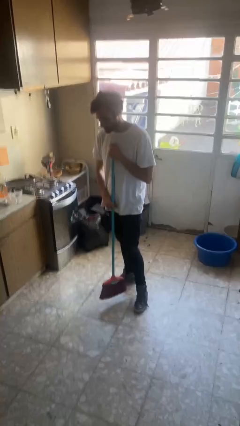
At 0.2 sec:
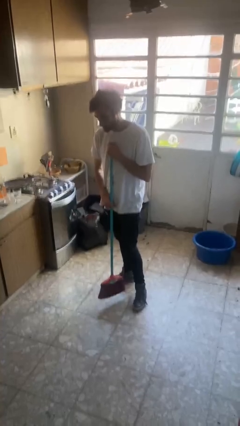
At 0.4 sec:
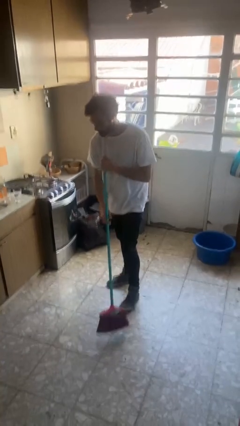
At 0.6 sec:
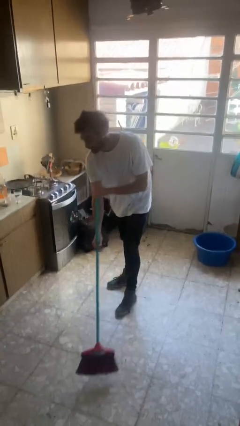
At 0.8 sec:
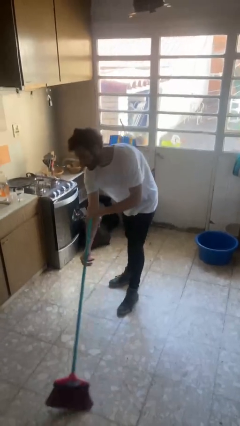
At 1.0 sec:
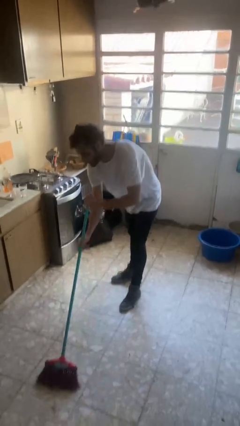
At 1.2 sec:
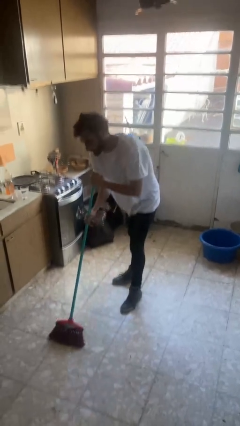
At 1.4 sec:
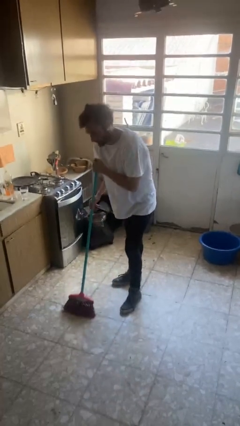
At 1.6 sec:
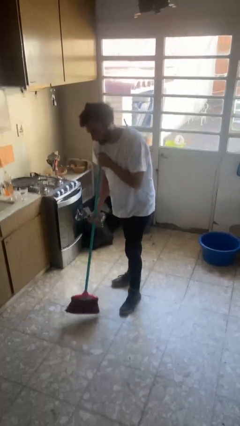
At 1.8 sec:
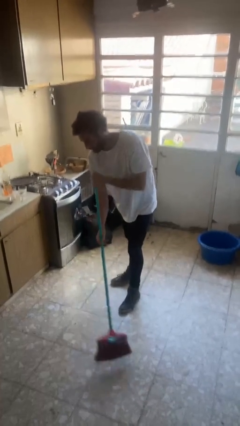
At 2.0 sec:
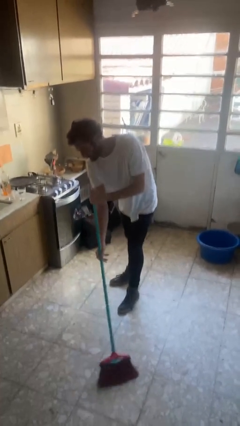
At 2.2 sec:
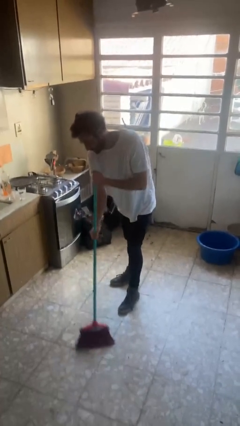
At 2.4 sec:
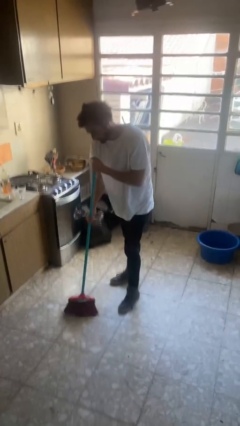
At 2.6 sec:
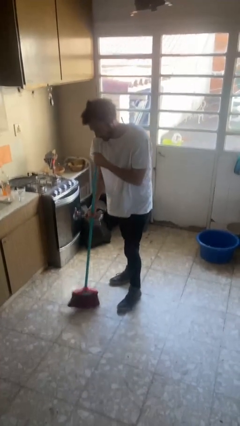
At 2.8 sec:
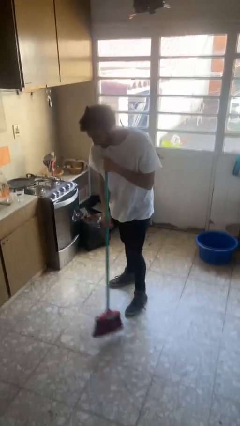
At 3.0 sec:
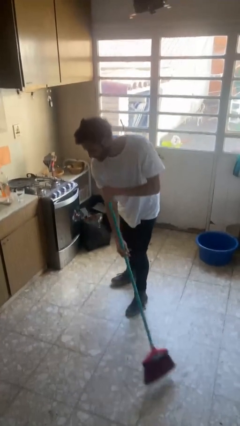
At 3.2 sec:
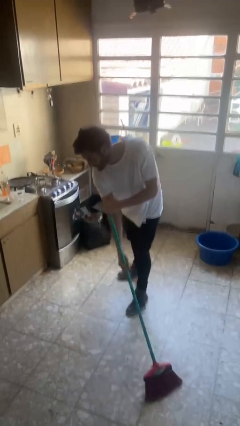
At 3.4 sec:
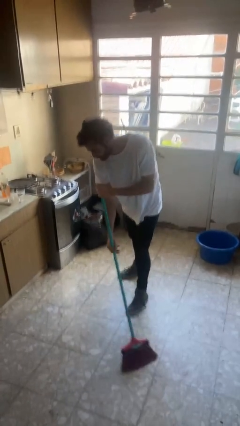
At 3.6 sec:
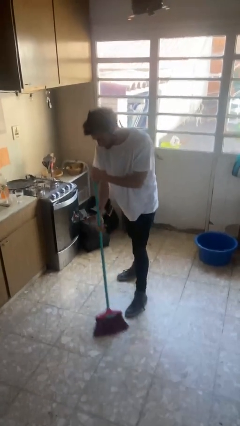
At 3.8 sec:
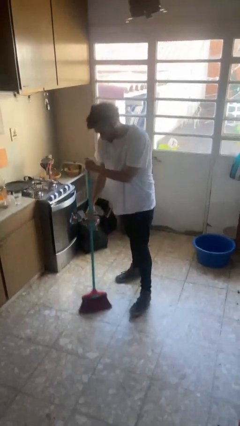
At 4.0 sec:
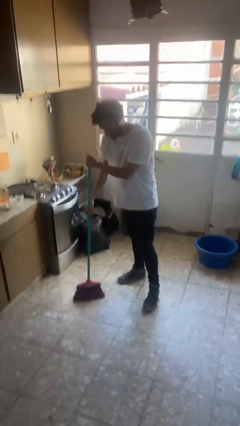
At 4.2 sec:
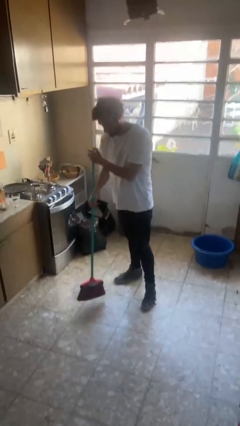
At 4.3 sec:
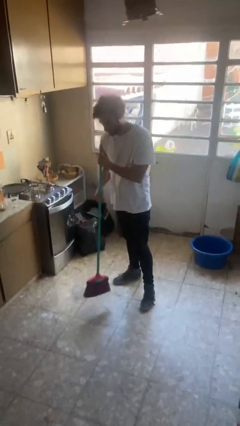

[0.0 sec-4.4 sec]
person sweeps floor

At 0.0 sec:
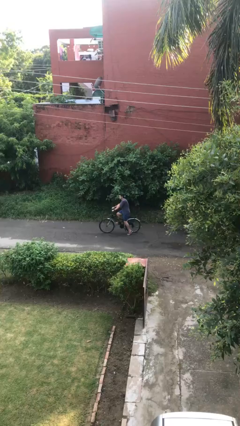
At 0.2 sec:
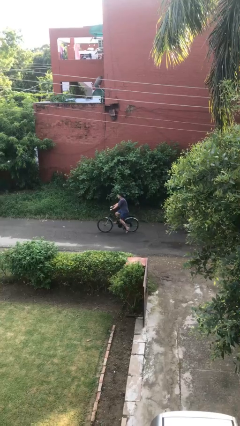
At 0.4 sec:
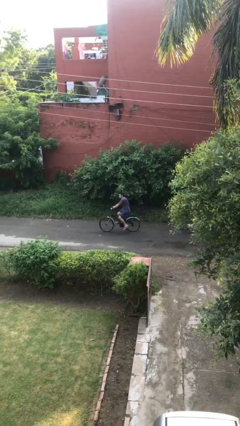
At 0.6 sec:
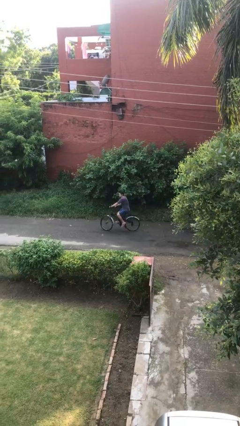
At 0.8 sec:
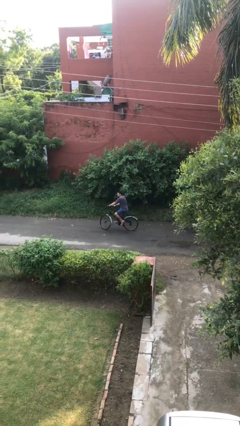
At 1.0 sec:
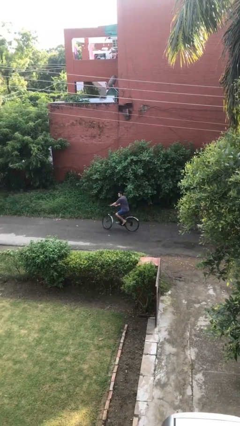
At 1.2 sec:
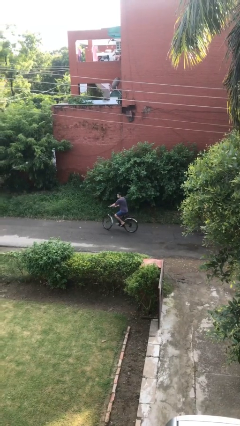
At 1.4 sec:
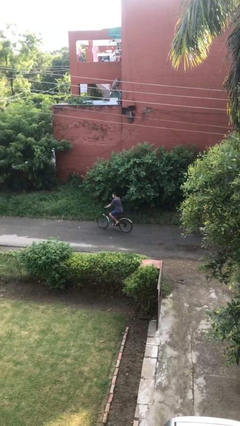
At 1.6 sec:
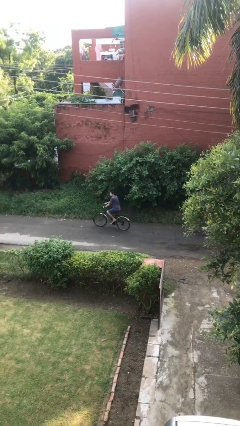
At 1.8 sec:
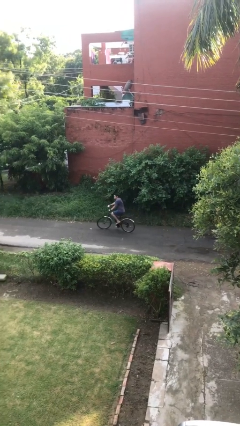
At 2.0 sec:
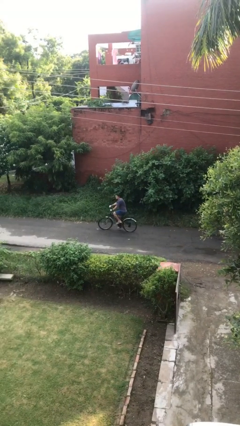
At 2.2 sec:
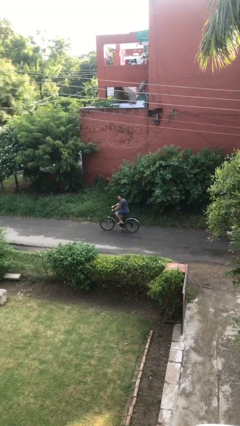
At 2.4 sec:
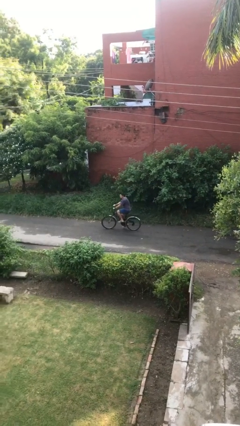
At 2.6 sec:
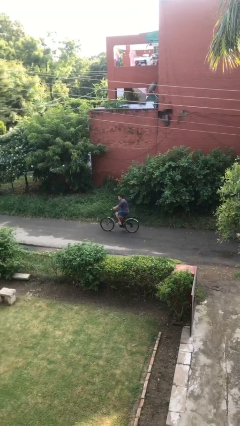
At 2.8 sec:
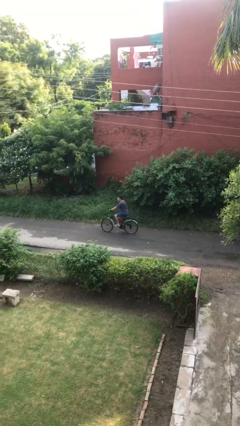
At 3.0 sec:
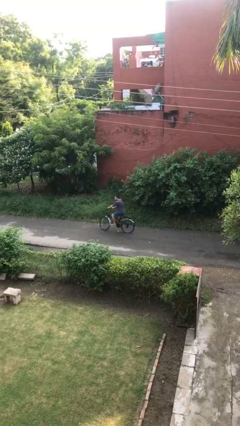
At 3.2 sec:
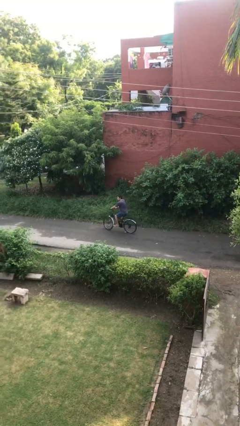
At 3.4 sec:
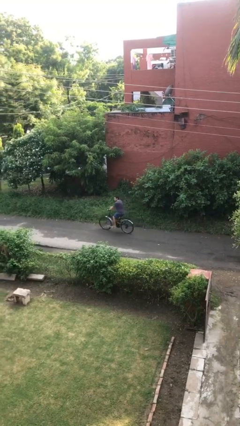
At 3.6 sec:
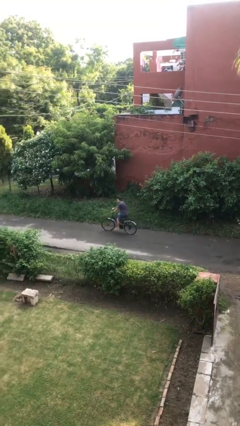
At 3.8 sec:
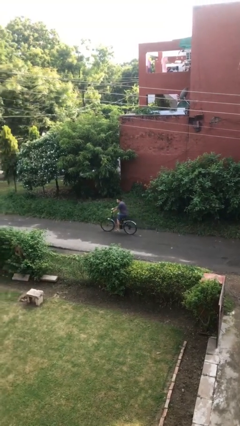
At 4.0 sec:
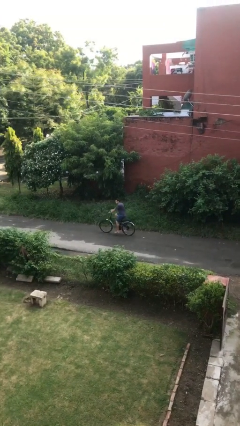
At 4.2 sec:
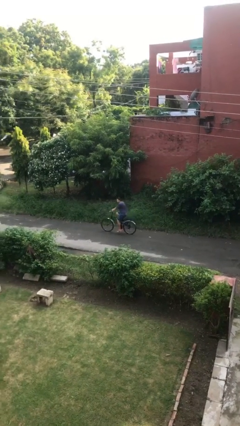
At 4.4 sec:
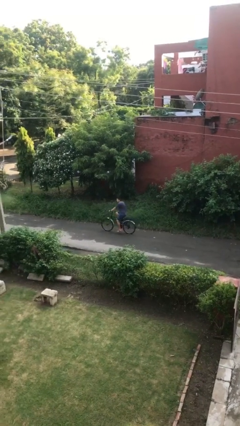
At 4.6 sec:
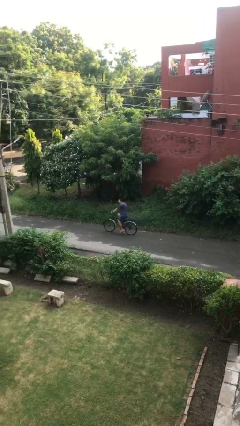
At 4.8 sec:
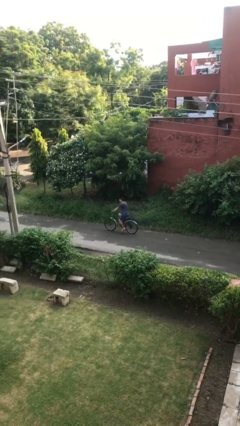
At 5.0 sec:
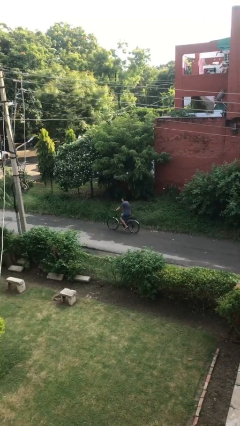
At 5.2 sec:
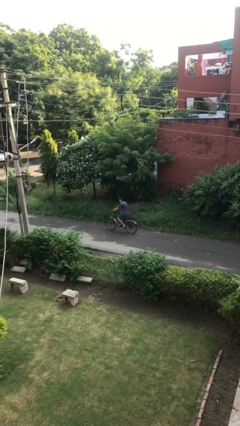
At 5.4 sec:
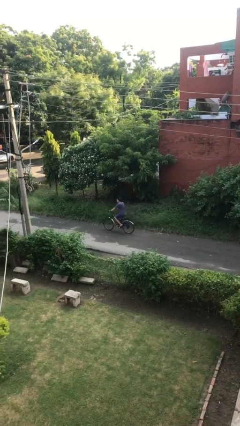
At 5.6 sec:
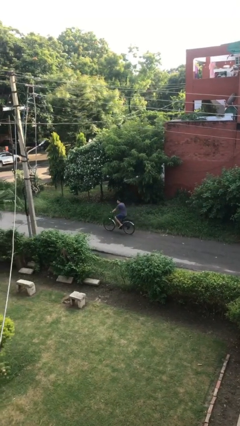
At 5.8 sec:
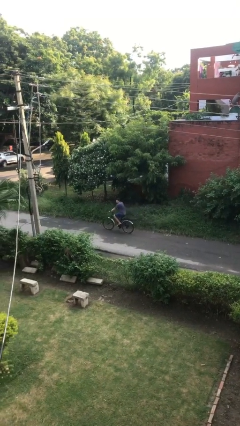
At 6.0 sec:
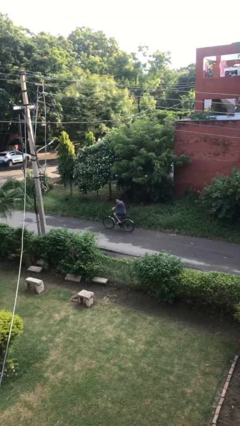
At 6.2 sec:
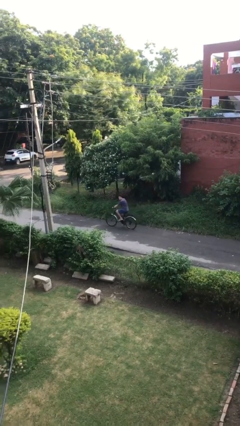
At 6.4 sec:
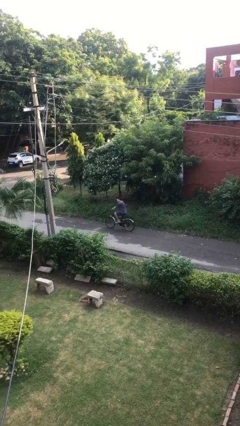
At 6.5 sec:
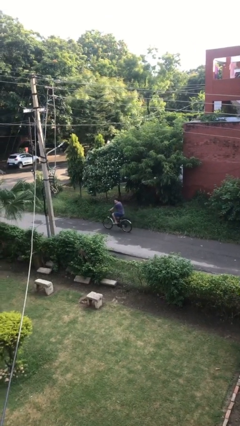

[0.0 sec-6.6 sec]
person rides bicycle

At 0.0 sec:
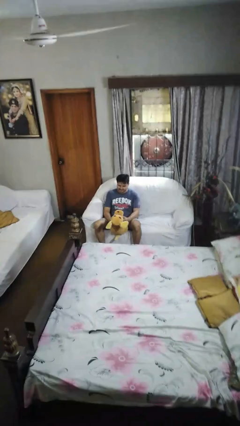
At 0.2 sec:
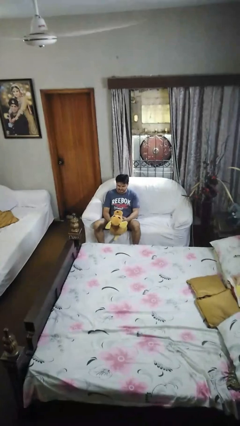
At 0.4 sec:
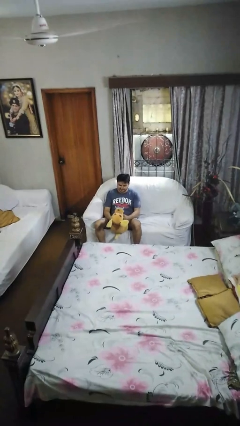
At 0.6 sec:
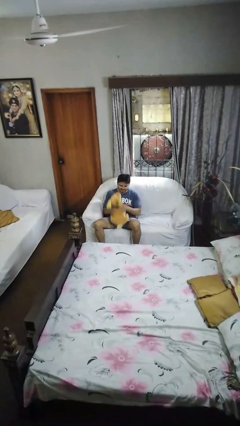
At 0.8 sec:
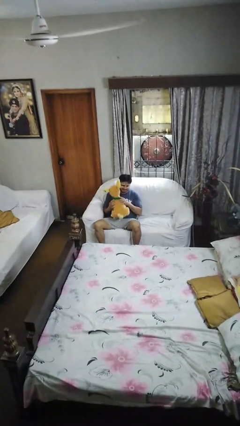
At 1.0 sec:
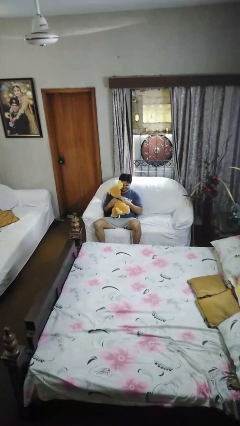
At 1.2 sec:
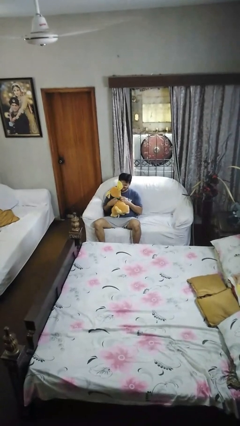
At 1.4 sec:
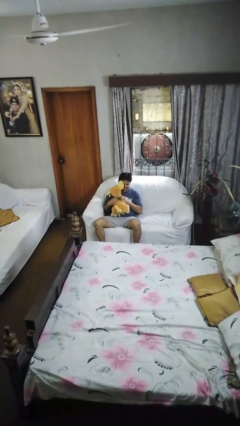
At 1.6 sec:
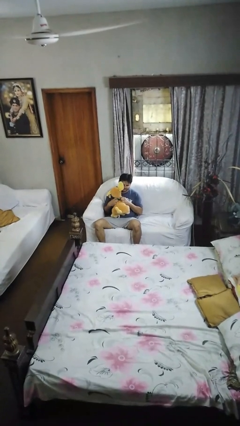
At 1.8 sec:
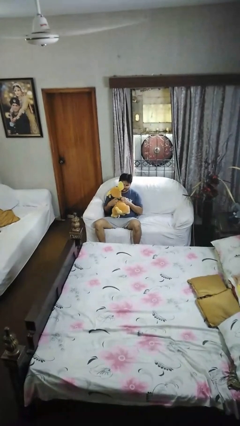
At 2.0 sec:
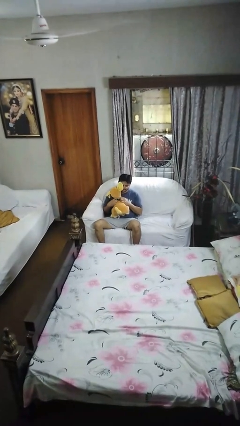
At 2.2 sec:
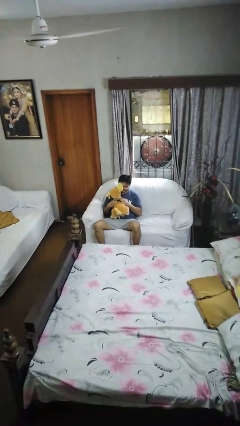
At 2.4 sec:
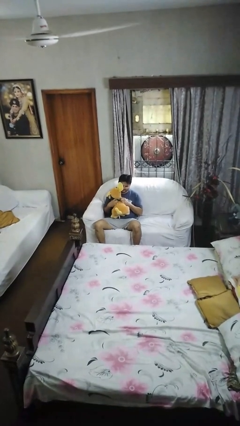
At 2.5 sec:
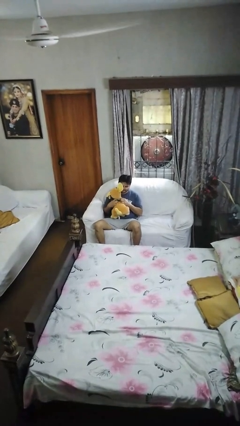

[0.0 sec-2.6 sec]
person hugs stuffed animal

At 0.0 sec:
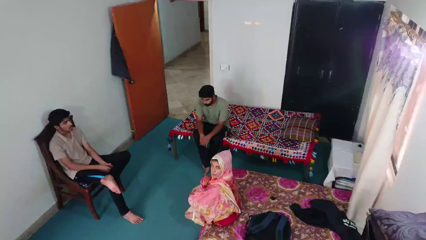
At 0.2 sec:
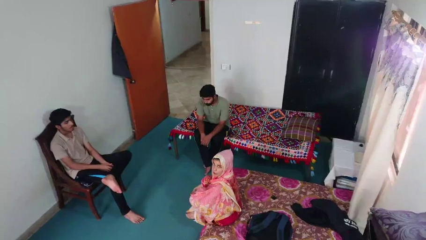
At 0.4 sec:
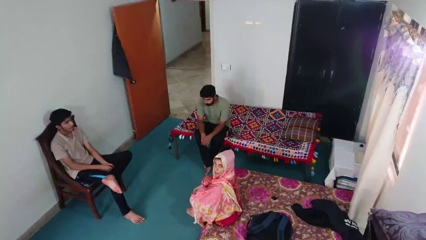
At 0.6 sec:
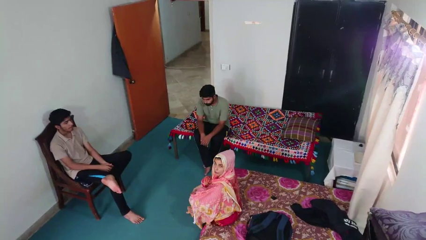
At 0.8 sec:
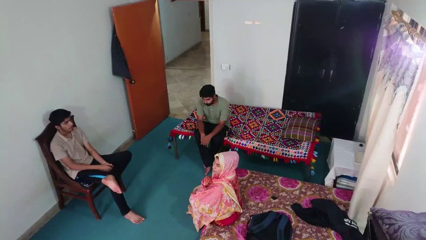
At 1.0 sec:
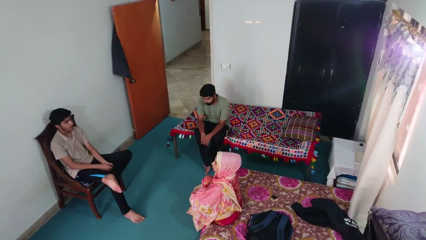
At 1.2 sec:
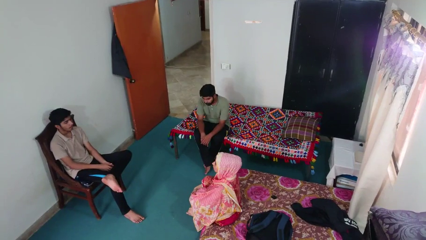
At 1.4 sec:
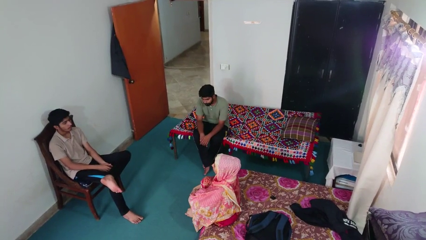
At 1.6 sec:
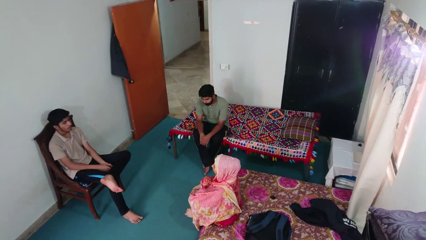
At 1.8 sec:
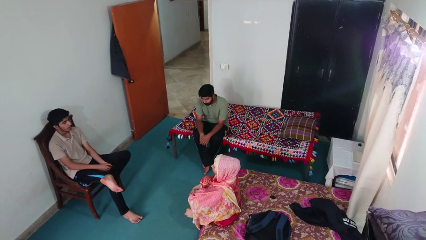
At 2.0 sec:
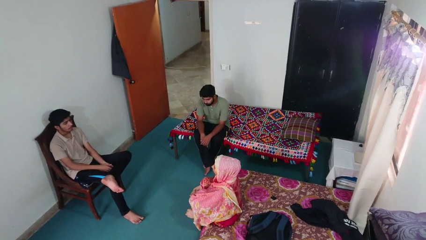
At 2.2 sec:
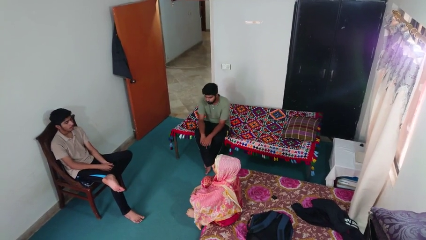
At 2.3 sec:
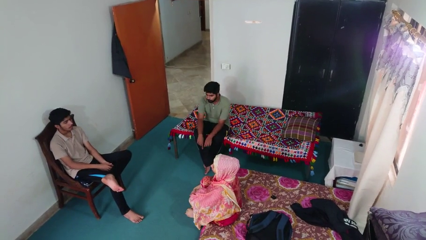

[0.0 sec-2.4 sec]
person points at person

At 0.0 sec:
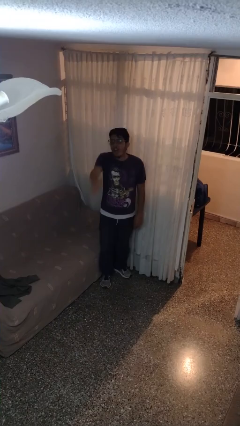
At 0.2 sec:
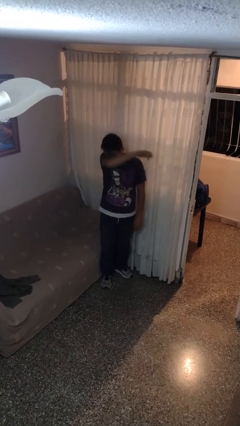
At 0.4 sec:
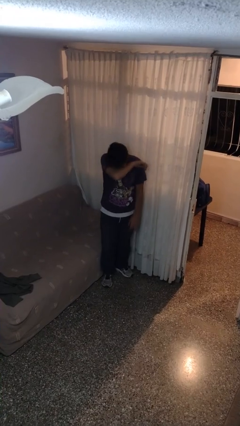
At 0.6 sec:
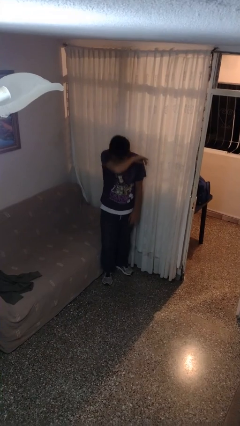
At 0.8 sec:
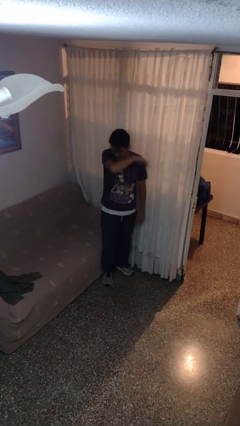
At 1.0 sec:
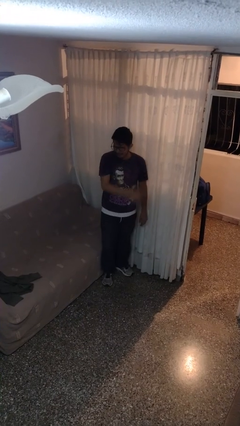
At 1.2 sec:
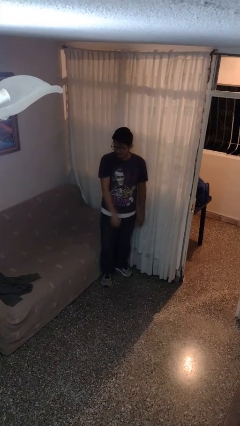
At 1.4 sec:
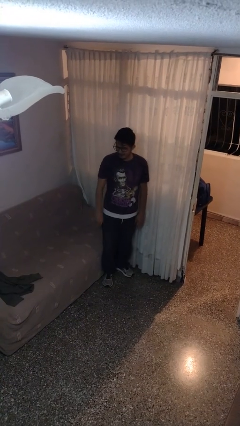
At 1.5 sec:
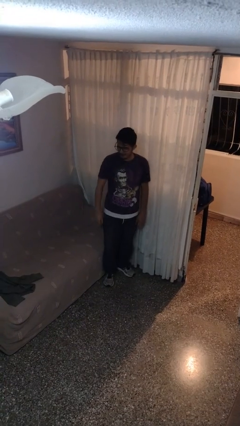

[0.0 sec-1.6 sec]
person sneezes into arm
